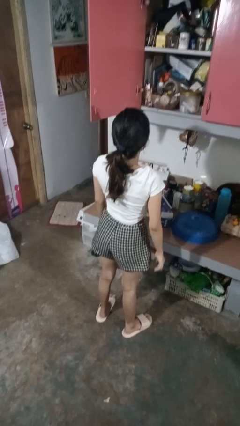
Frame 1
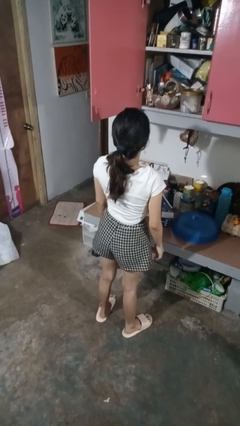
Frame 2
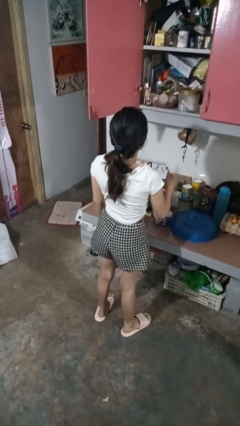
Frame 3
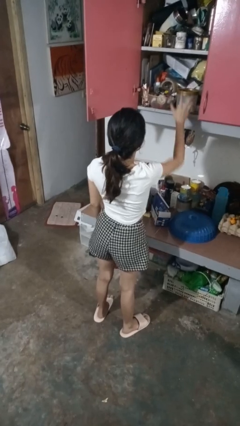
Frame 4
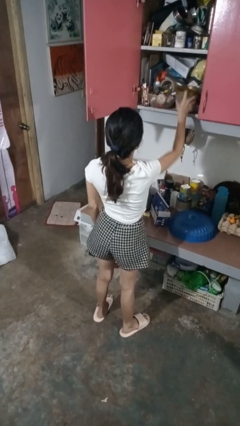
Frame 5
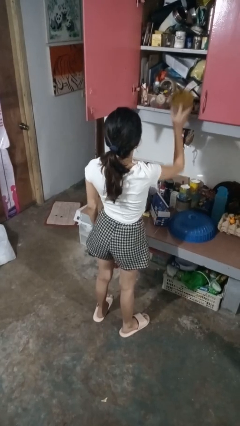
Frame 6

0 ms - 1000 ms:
person picks up object from cabinet

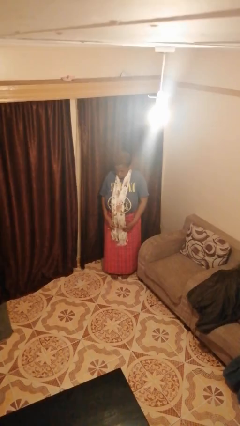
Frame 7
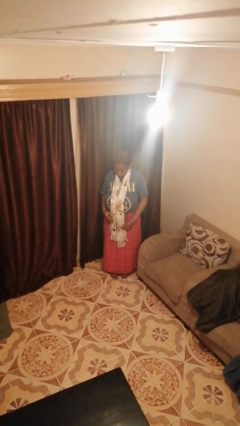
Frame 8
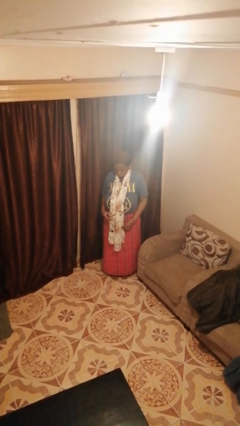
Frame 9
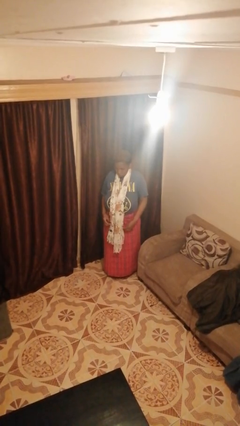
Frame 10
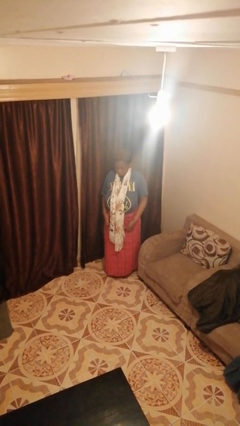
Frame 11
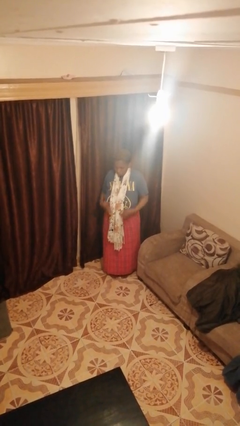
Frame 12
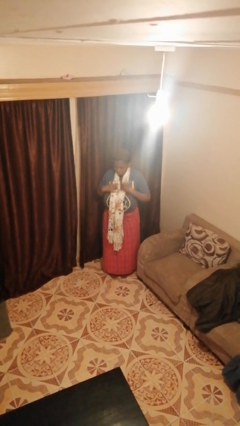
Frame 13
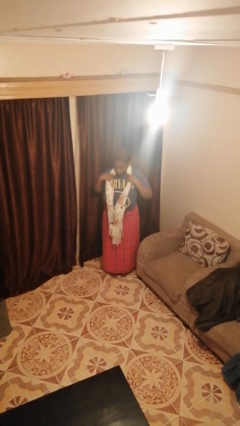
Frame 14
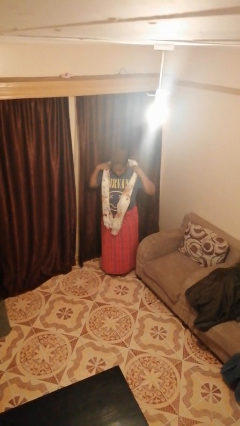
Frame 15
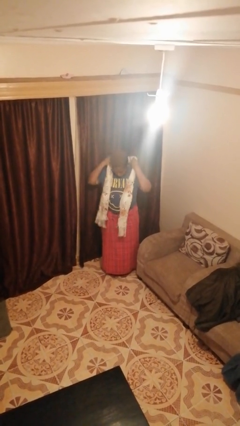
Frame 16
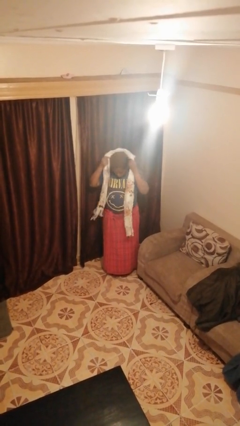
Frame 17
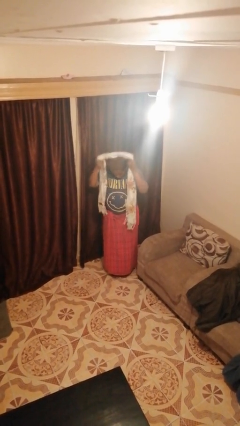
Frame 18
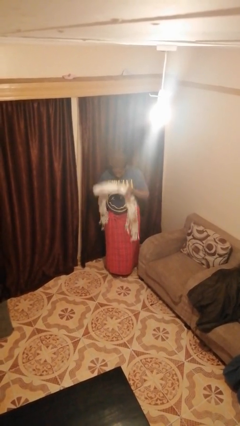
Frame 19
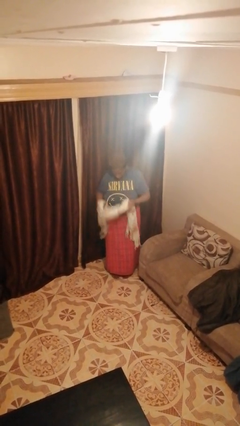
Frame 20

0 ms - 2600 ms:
person takes off scarf

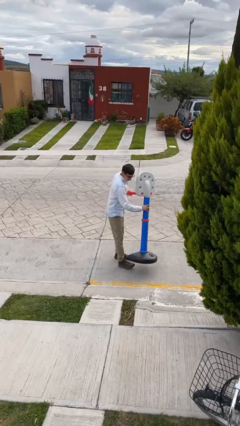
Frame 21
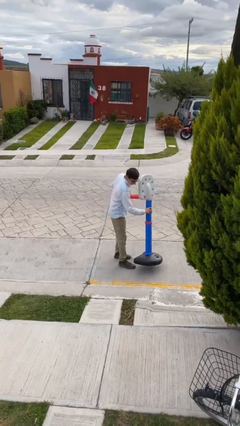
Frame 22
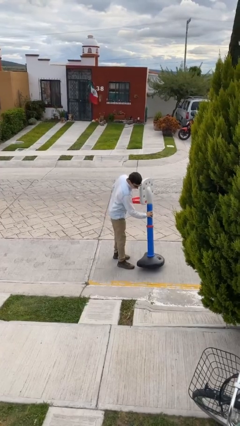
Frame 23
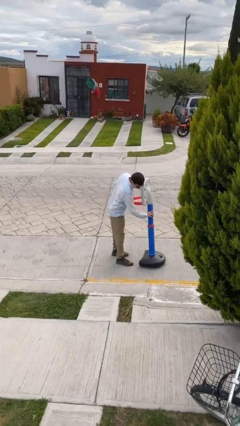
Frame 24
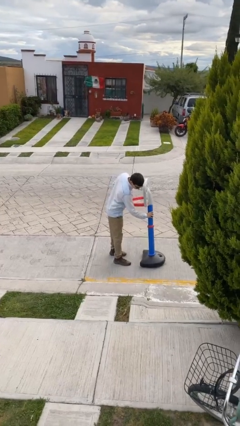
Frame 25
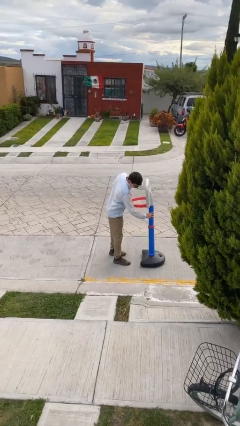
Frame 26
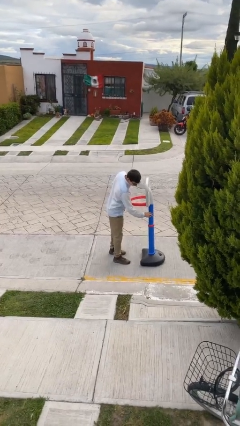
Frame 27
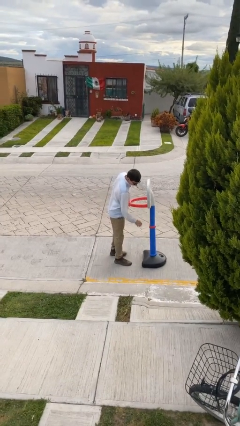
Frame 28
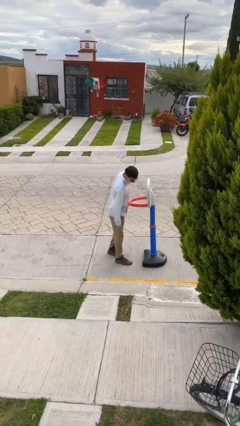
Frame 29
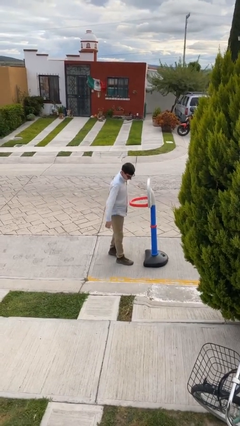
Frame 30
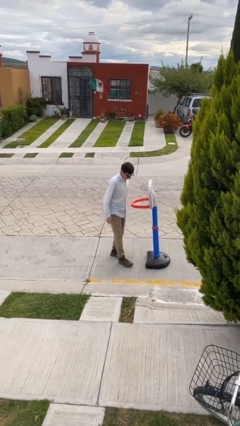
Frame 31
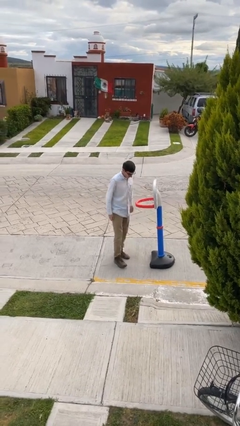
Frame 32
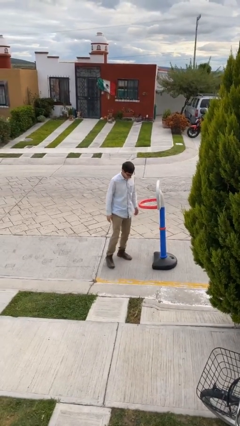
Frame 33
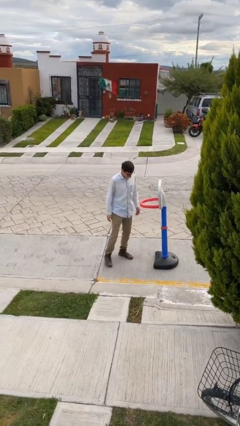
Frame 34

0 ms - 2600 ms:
person puts down object on floor

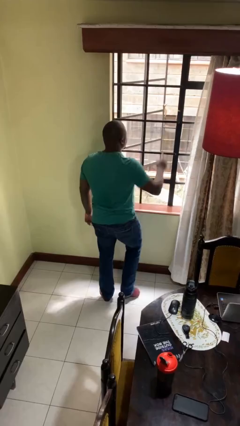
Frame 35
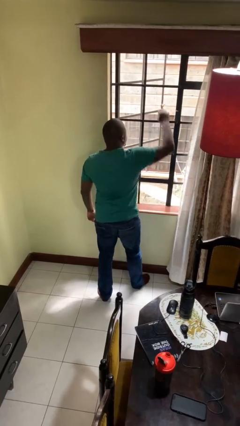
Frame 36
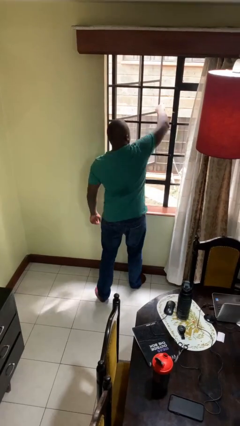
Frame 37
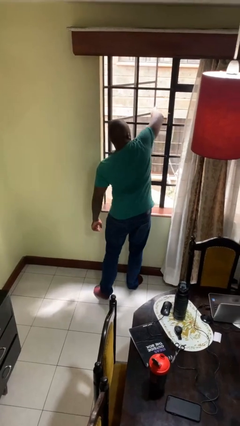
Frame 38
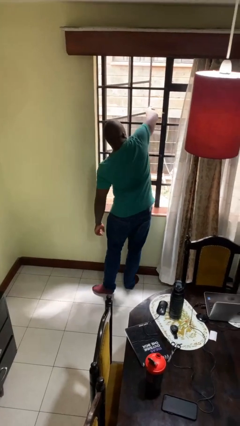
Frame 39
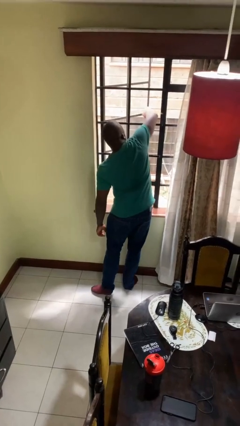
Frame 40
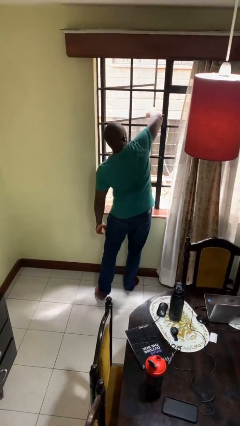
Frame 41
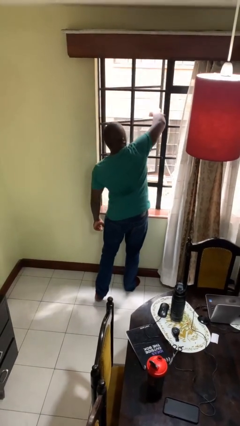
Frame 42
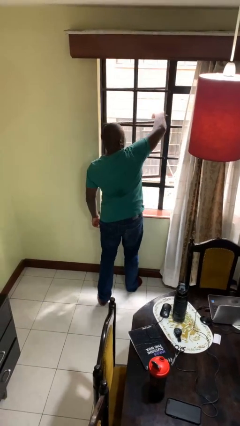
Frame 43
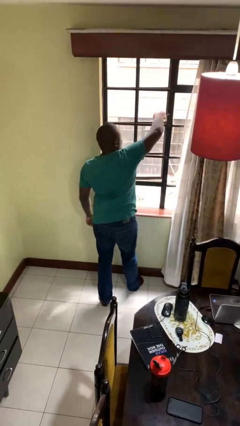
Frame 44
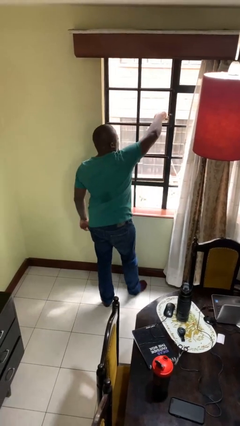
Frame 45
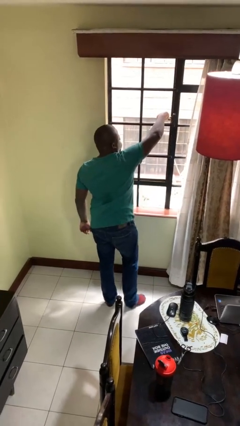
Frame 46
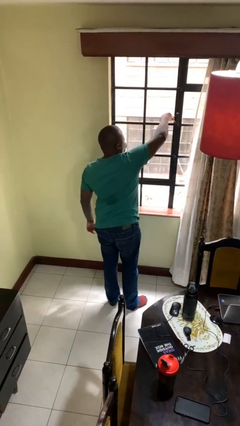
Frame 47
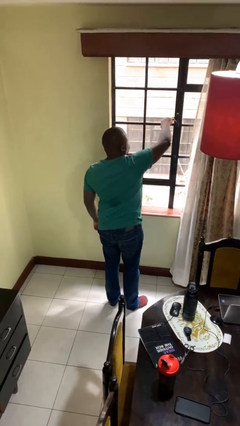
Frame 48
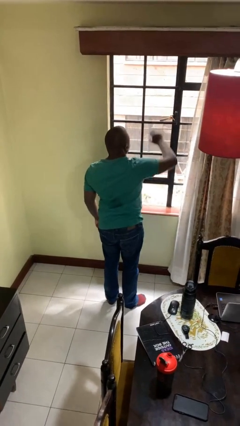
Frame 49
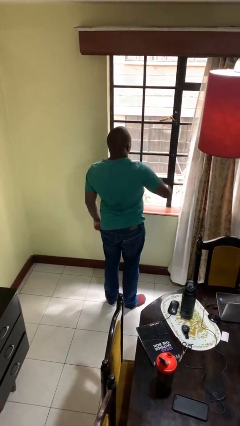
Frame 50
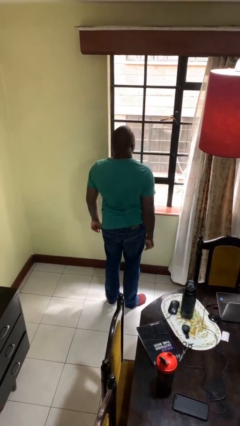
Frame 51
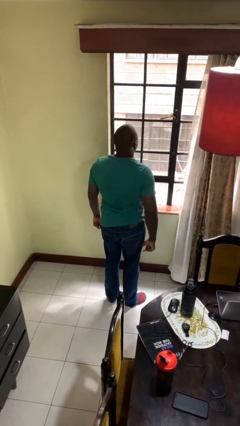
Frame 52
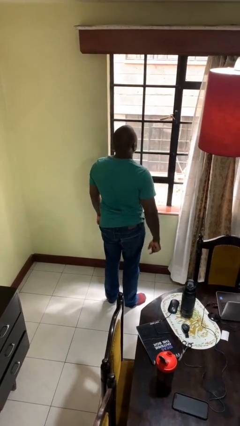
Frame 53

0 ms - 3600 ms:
person closes home window

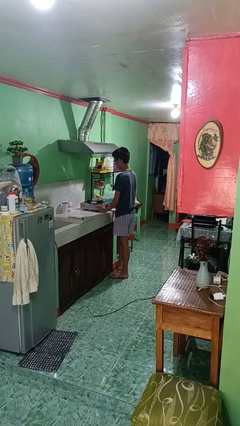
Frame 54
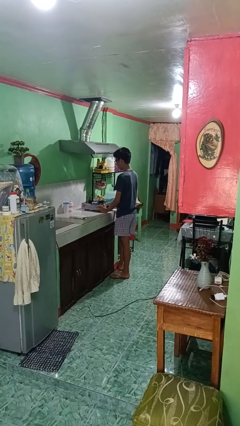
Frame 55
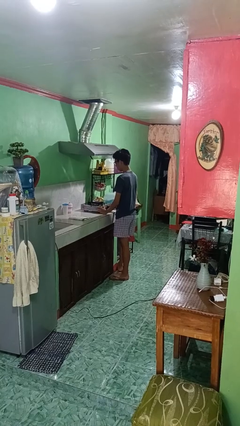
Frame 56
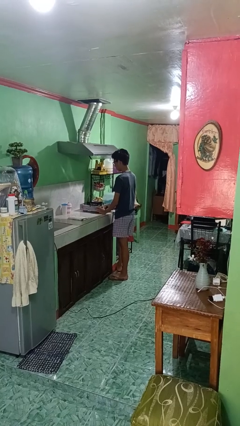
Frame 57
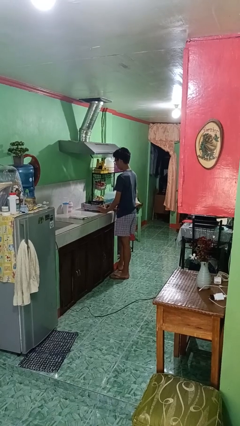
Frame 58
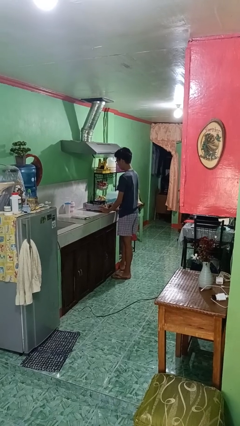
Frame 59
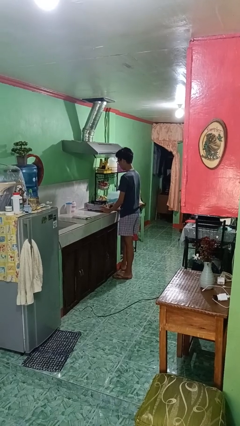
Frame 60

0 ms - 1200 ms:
person turns off stovetop

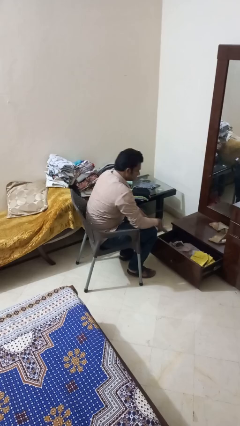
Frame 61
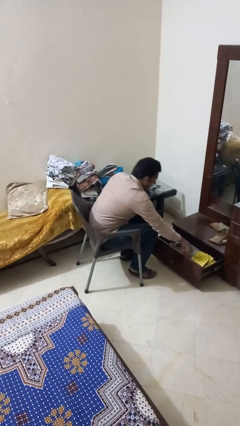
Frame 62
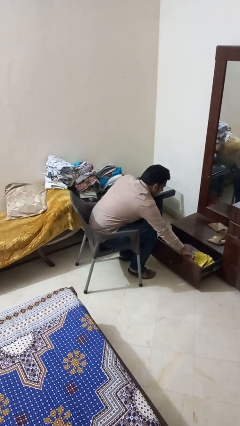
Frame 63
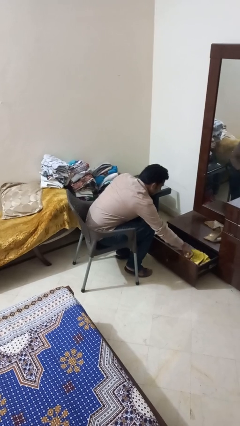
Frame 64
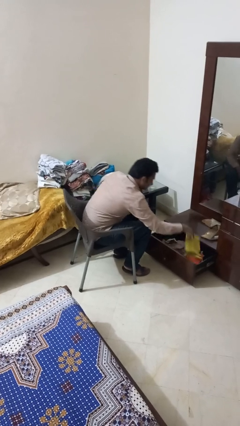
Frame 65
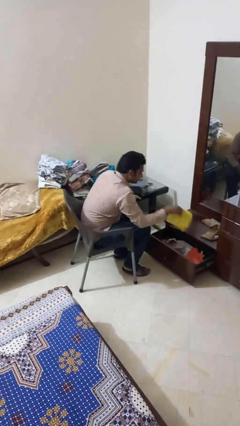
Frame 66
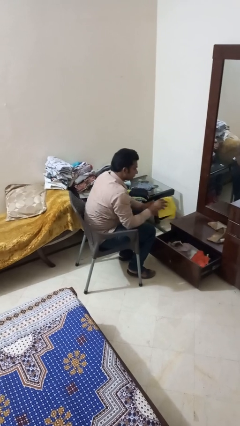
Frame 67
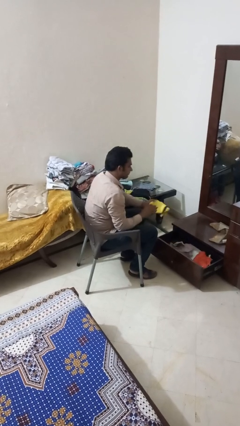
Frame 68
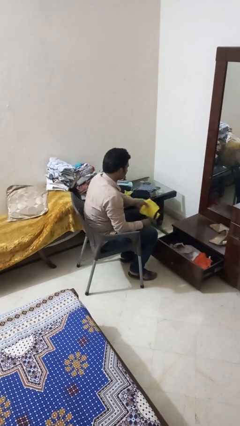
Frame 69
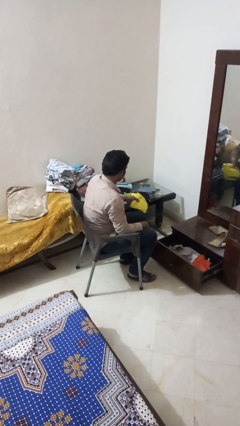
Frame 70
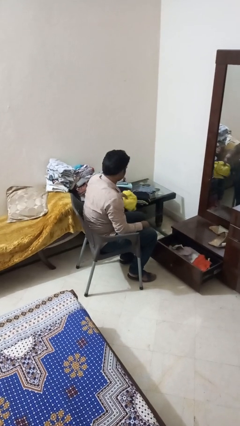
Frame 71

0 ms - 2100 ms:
person takes clothes from dresser

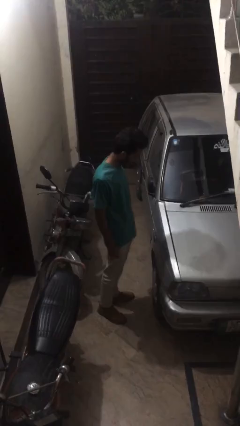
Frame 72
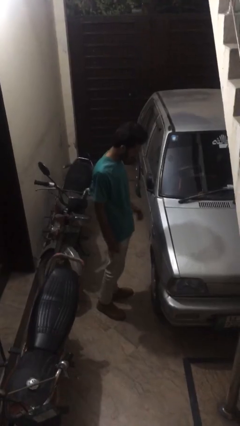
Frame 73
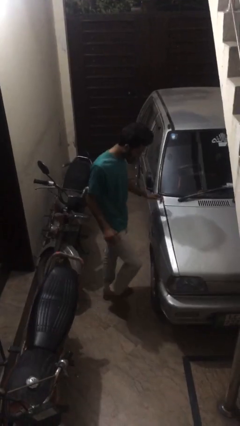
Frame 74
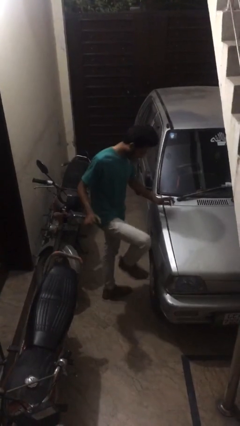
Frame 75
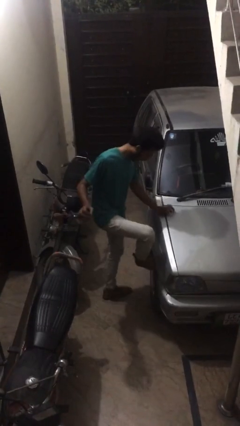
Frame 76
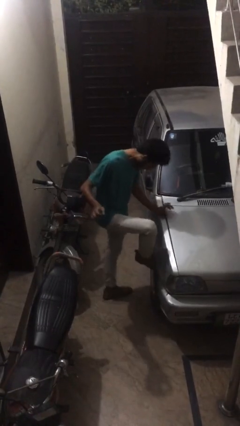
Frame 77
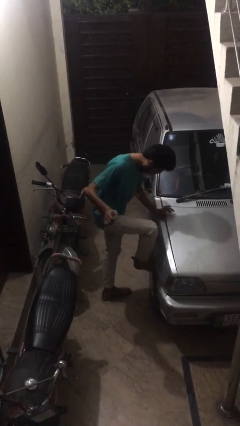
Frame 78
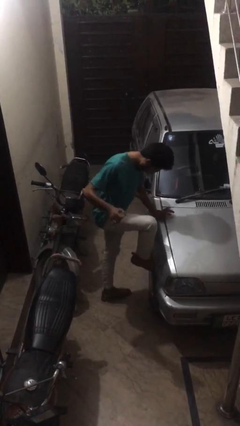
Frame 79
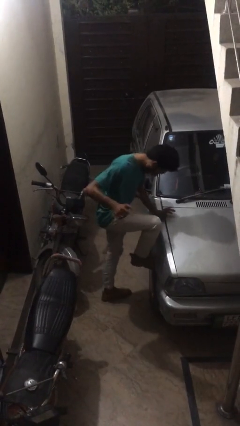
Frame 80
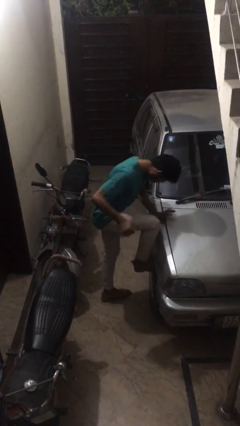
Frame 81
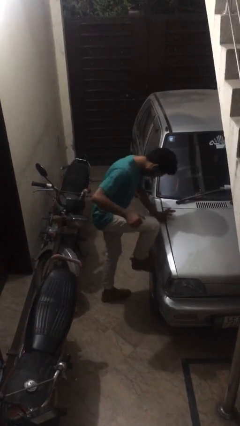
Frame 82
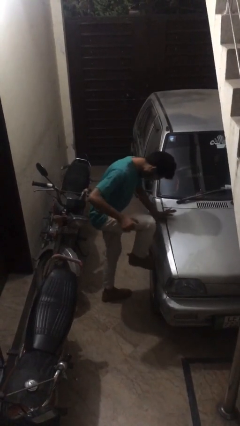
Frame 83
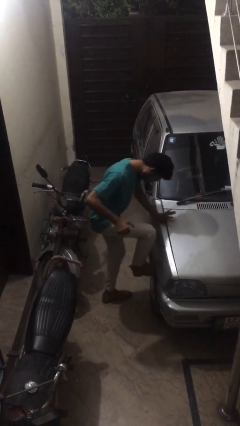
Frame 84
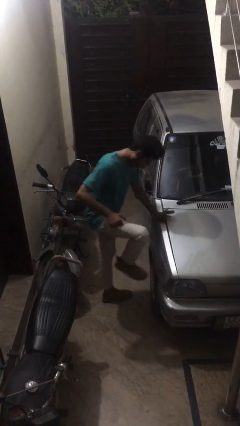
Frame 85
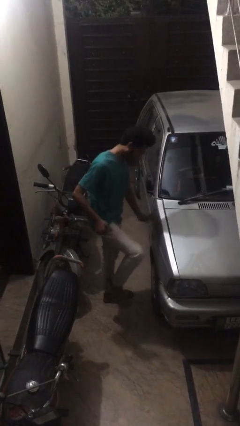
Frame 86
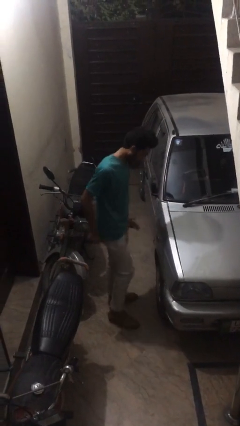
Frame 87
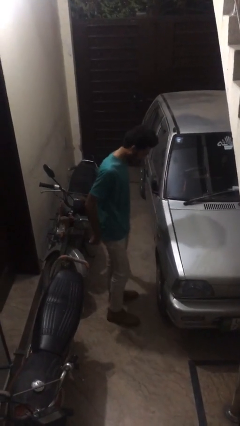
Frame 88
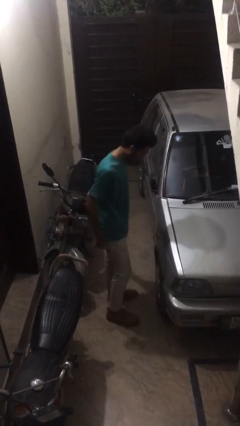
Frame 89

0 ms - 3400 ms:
person kicks car tires

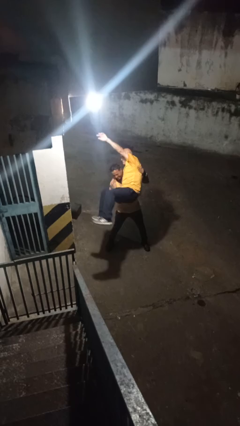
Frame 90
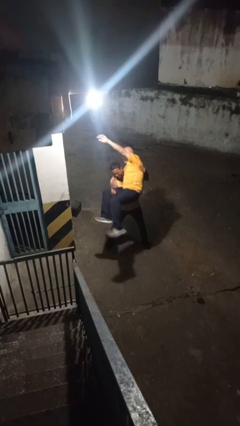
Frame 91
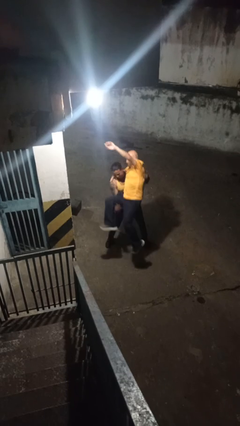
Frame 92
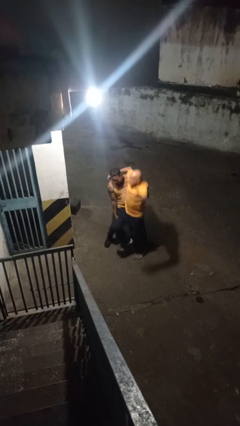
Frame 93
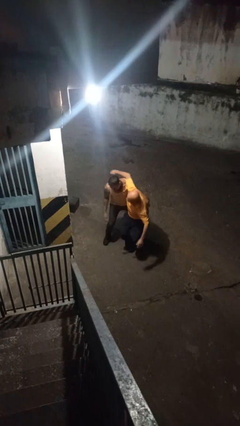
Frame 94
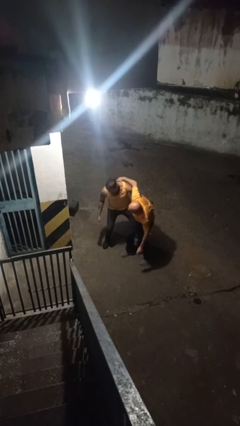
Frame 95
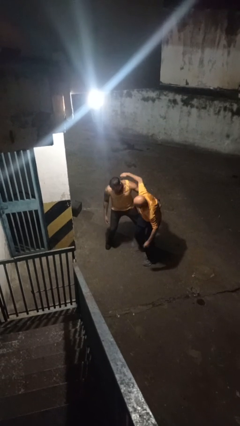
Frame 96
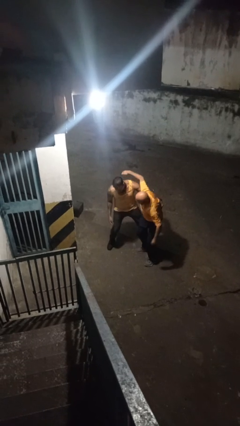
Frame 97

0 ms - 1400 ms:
person puts down person
